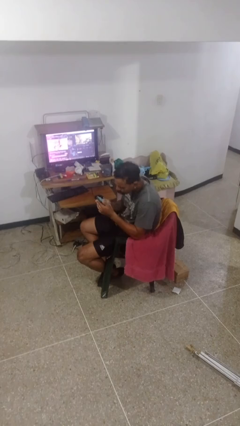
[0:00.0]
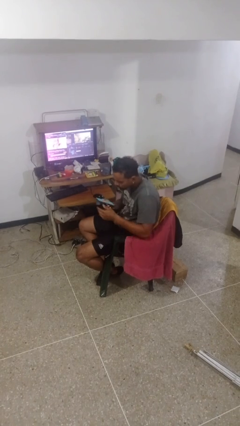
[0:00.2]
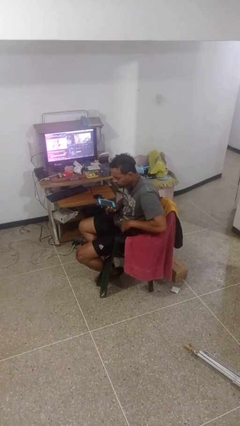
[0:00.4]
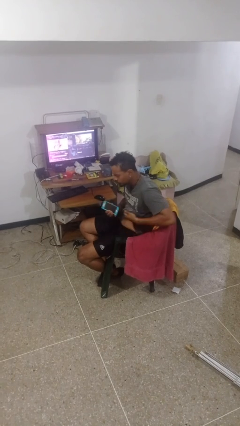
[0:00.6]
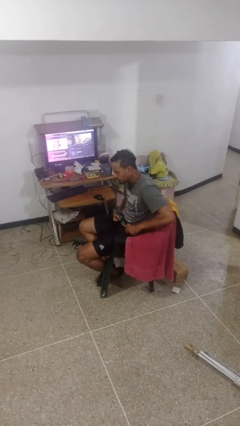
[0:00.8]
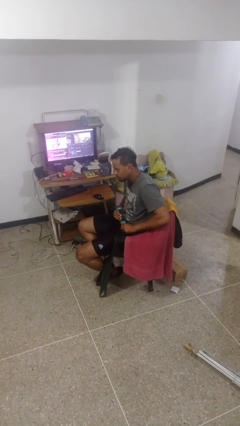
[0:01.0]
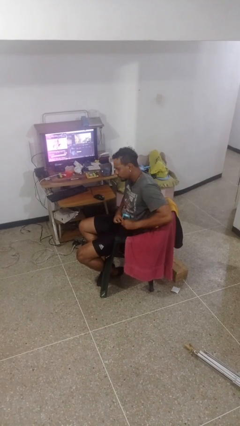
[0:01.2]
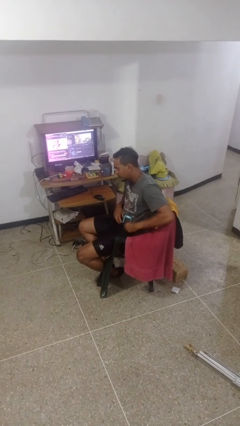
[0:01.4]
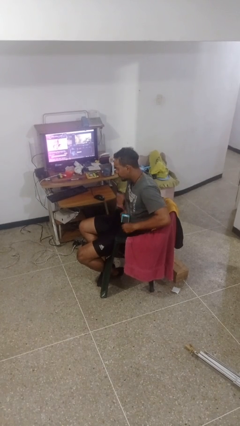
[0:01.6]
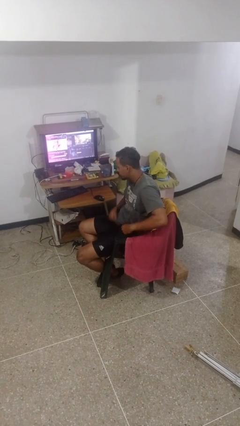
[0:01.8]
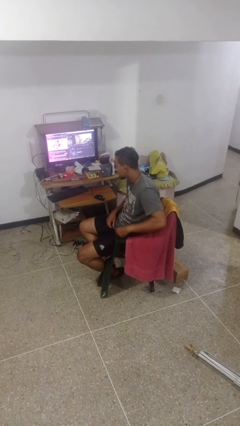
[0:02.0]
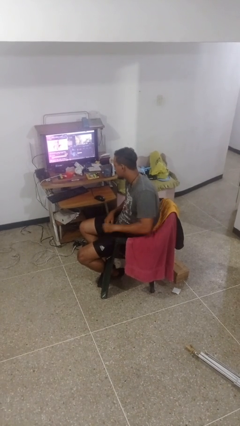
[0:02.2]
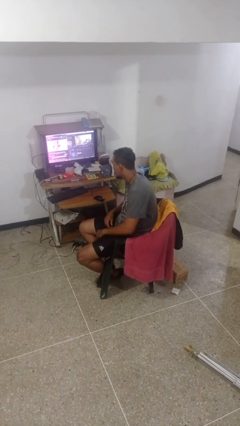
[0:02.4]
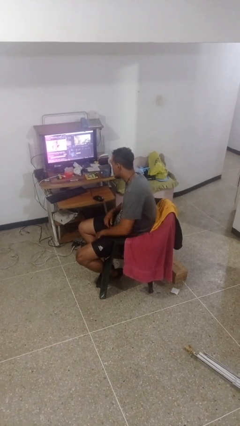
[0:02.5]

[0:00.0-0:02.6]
person puts phone into pocket

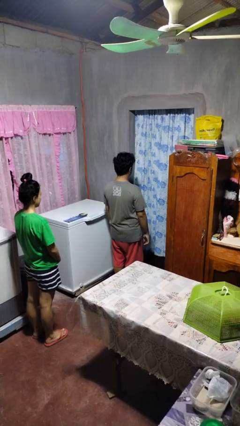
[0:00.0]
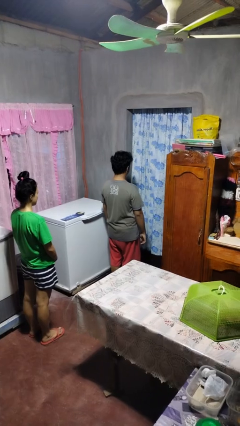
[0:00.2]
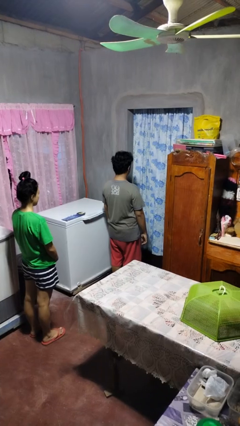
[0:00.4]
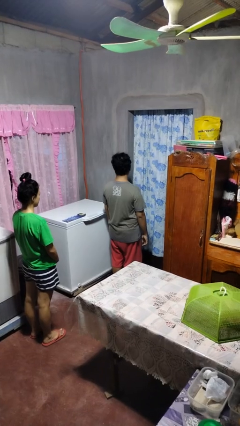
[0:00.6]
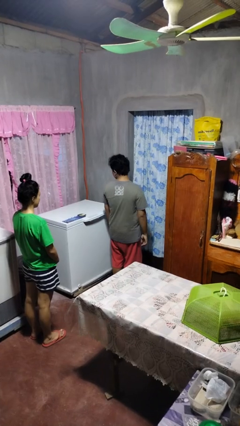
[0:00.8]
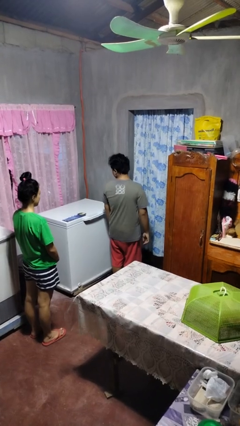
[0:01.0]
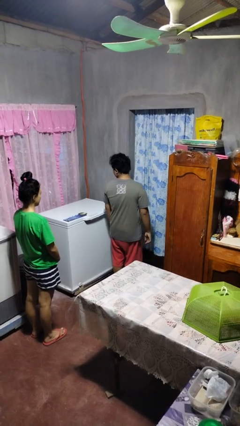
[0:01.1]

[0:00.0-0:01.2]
person looks over shoulder

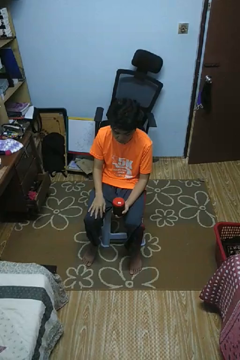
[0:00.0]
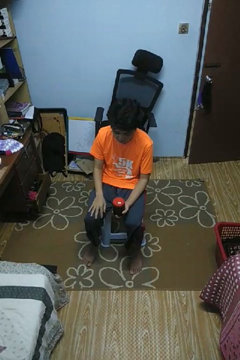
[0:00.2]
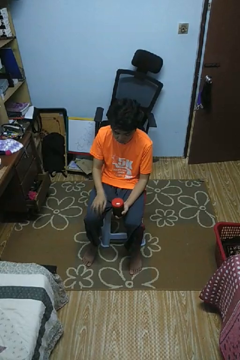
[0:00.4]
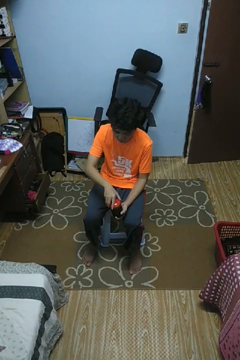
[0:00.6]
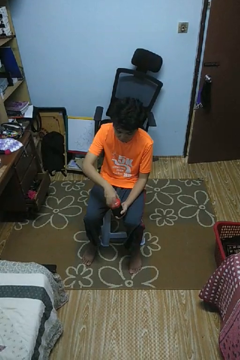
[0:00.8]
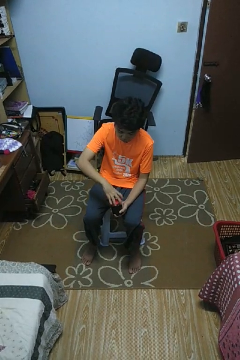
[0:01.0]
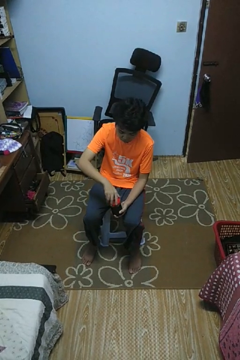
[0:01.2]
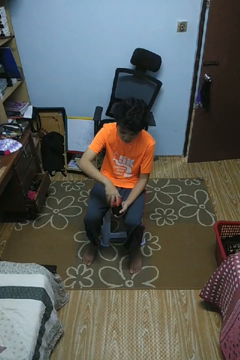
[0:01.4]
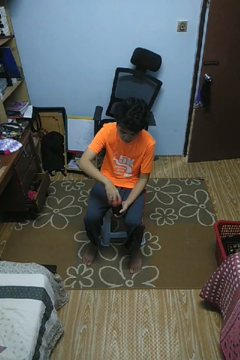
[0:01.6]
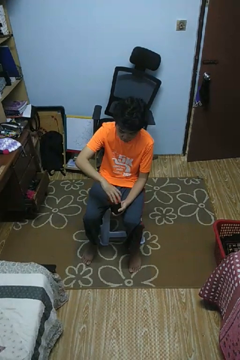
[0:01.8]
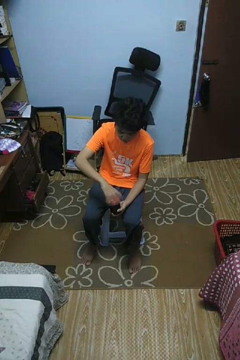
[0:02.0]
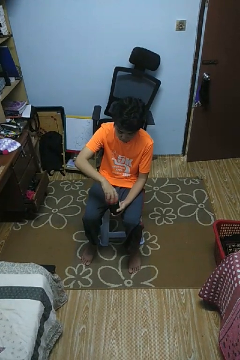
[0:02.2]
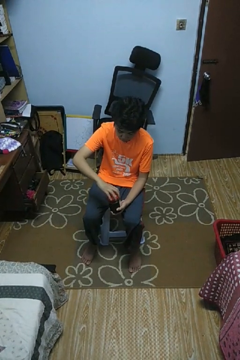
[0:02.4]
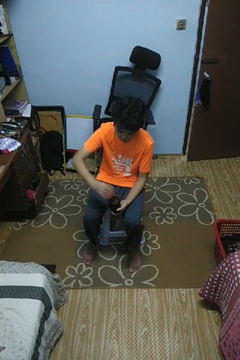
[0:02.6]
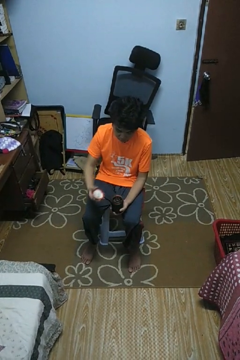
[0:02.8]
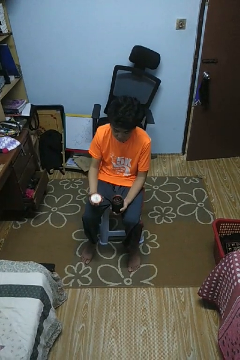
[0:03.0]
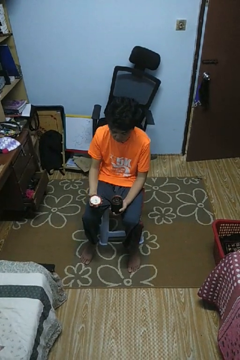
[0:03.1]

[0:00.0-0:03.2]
person opens jar

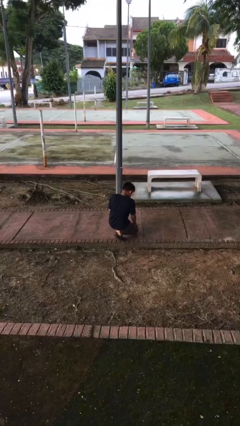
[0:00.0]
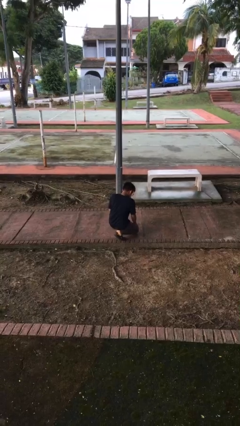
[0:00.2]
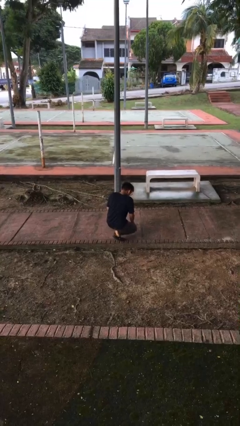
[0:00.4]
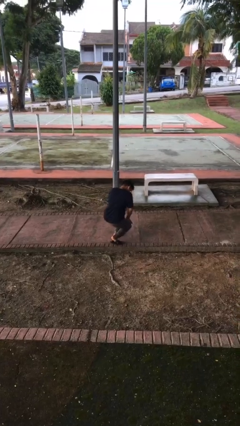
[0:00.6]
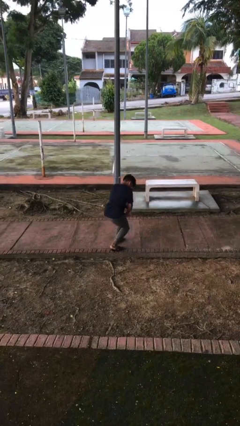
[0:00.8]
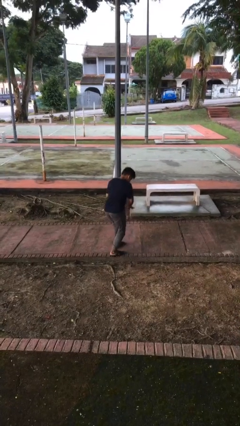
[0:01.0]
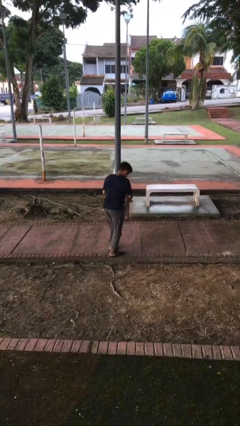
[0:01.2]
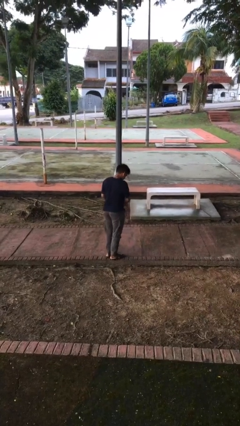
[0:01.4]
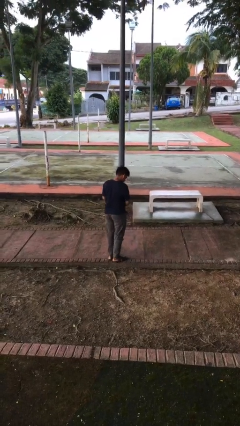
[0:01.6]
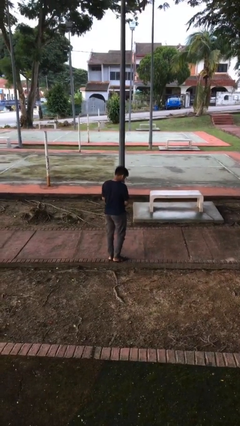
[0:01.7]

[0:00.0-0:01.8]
person stands up from floor

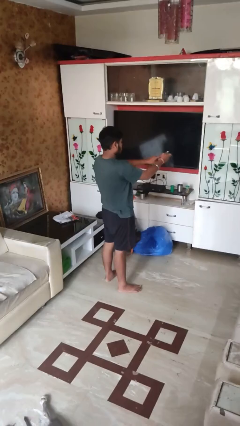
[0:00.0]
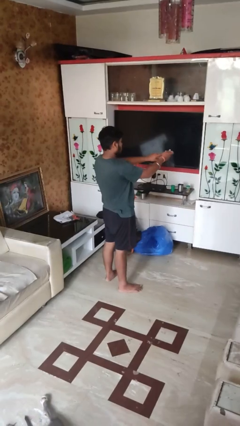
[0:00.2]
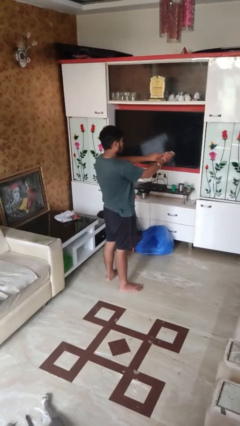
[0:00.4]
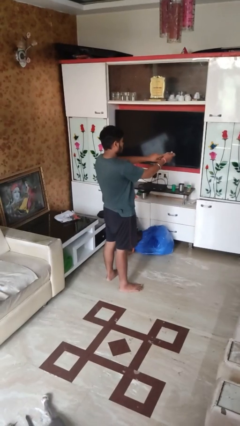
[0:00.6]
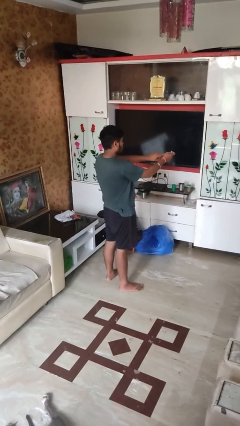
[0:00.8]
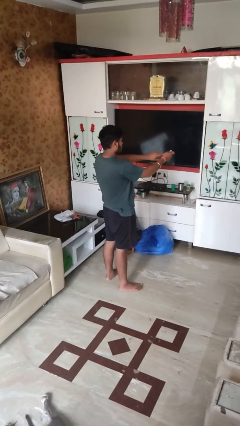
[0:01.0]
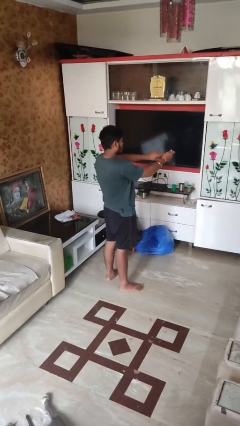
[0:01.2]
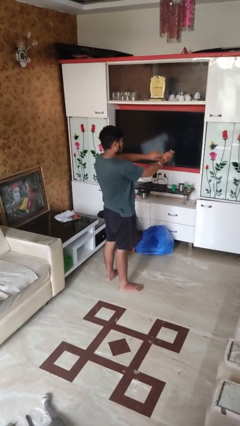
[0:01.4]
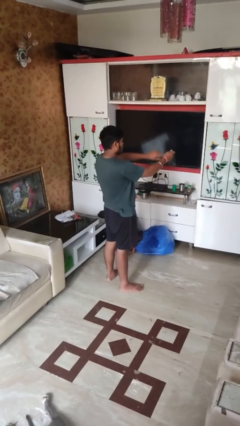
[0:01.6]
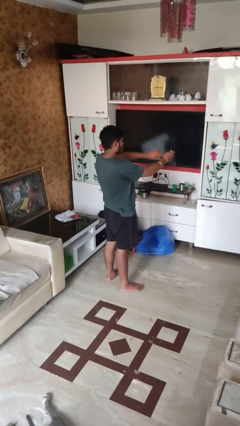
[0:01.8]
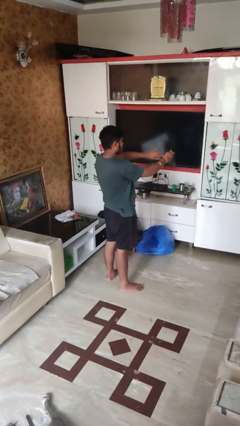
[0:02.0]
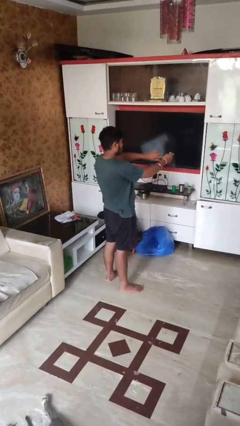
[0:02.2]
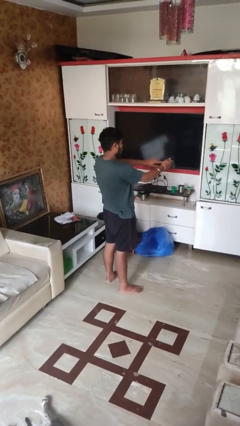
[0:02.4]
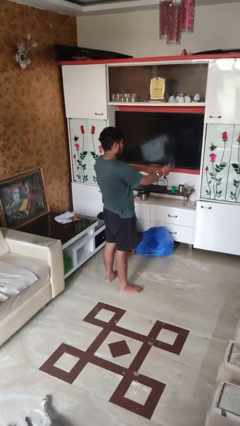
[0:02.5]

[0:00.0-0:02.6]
person clips fingernails

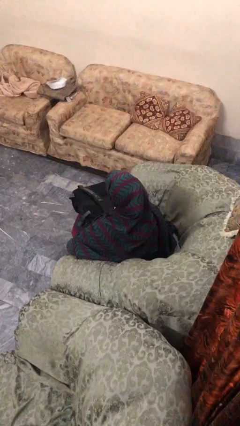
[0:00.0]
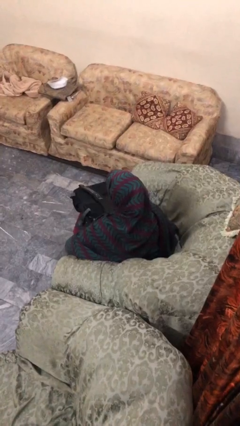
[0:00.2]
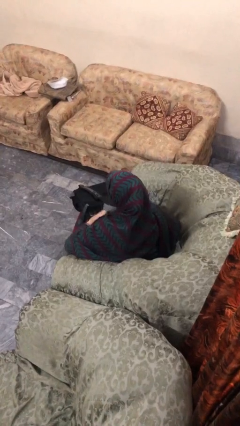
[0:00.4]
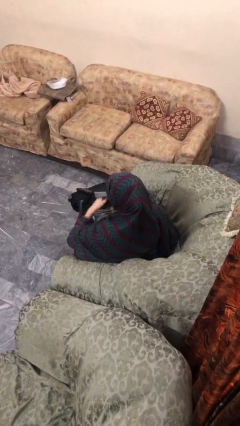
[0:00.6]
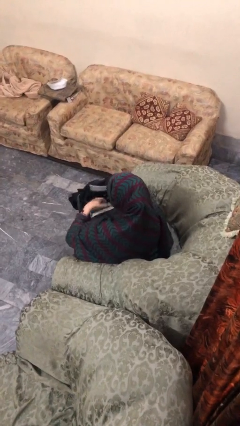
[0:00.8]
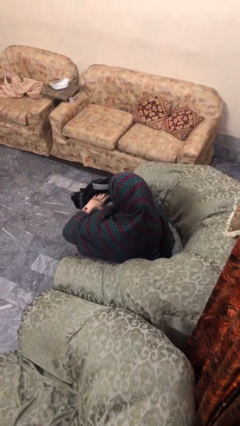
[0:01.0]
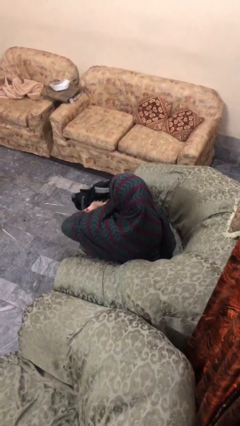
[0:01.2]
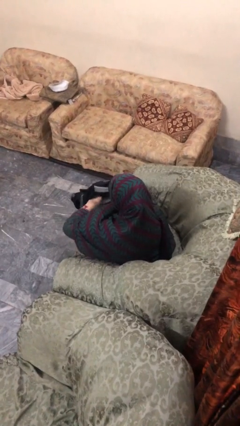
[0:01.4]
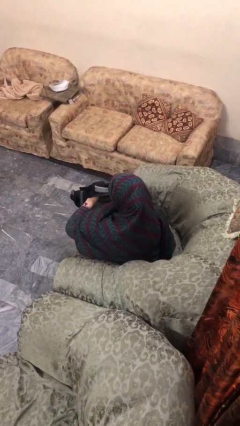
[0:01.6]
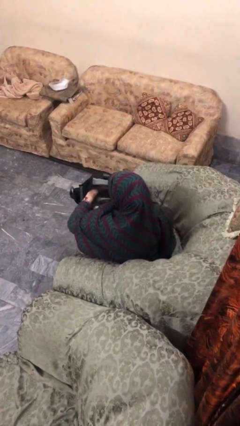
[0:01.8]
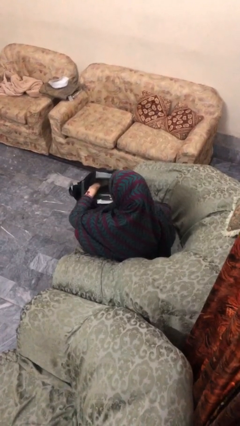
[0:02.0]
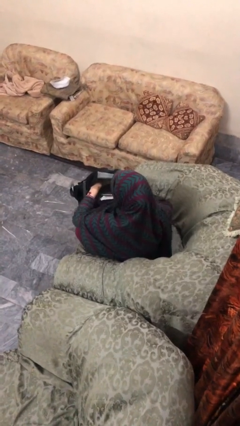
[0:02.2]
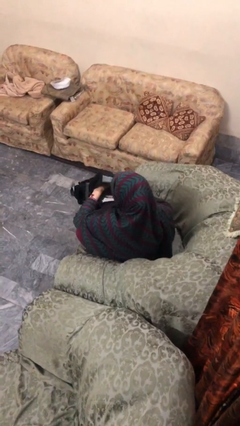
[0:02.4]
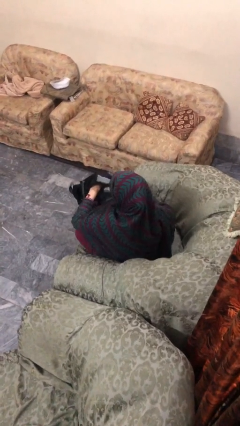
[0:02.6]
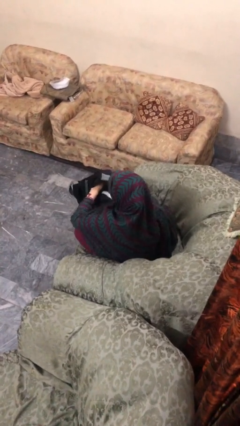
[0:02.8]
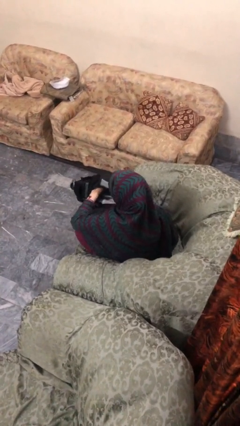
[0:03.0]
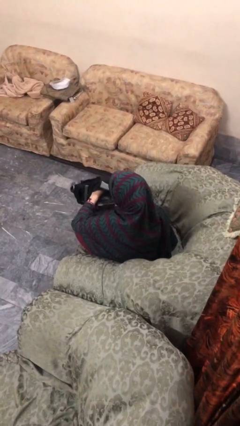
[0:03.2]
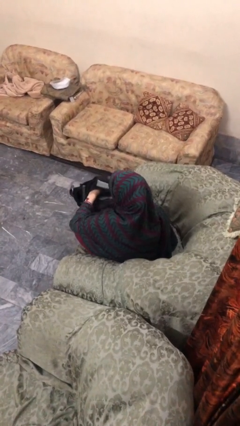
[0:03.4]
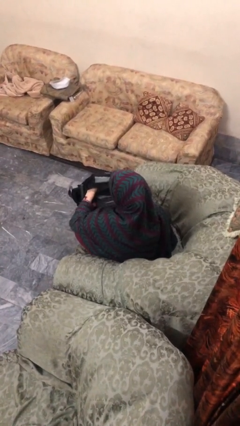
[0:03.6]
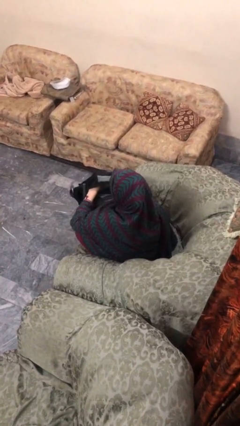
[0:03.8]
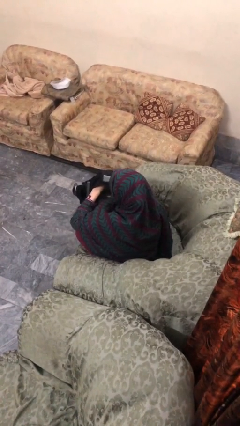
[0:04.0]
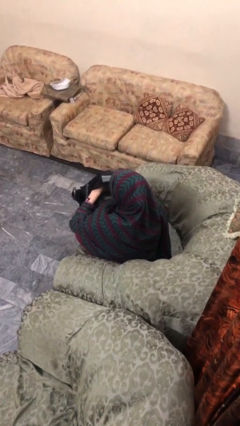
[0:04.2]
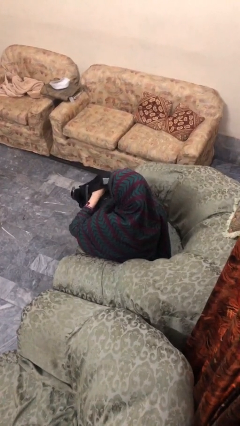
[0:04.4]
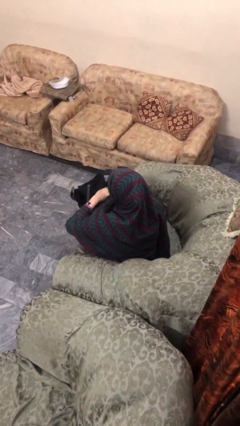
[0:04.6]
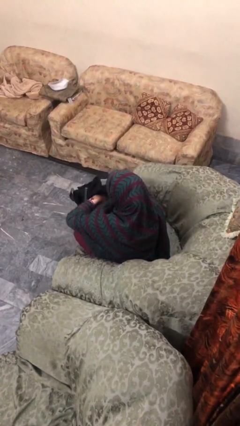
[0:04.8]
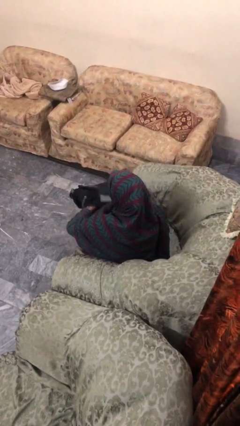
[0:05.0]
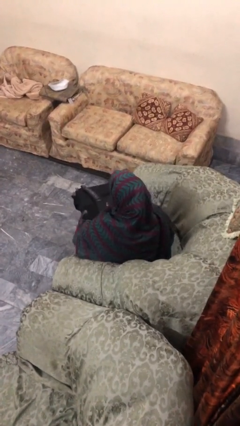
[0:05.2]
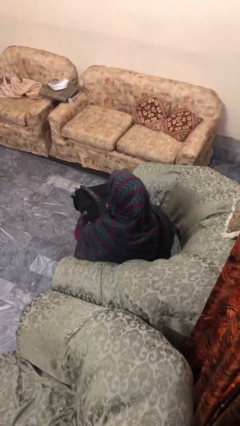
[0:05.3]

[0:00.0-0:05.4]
person searches in bag

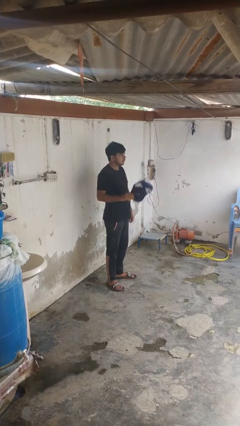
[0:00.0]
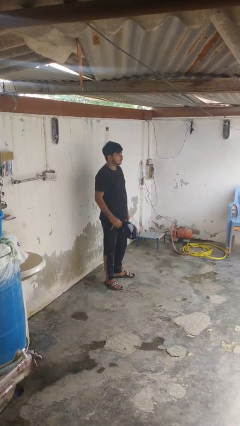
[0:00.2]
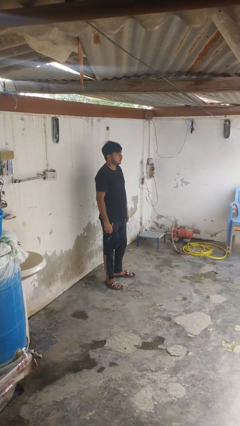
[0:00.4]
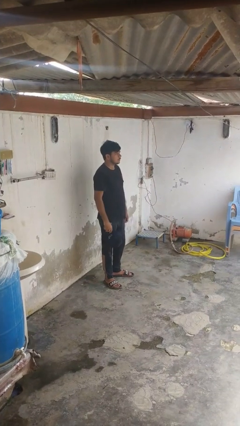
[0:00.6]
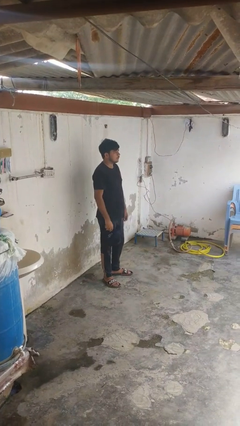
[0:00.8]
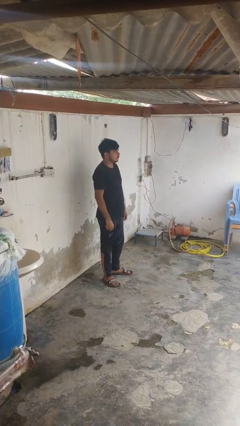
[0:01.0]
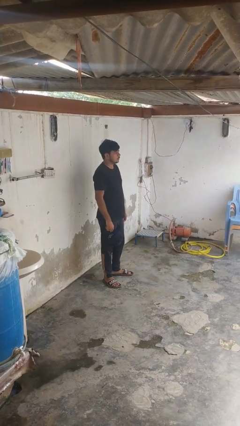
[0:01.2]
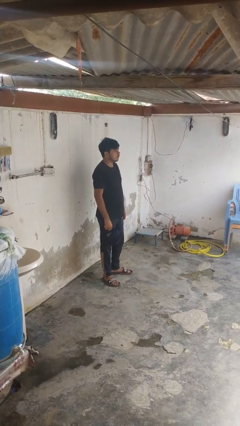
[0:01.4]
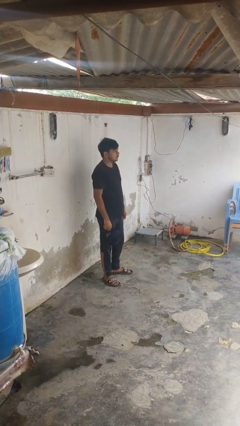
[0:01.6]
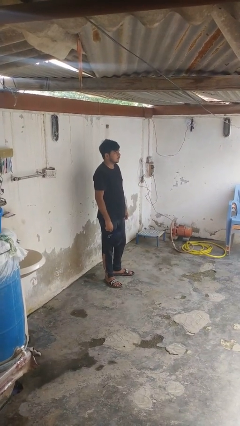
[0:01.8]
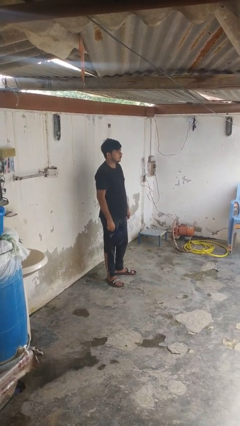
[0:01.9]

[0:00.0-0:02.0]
person takes off hat
